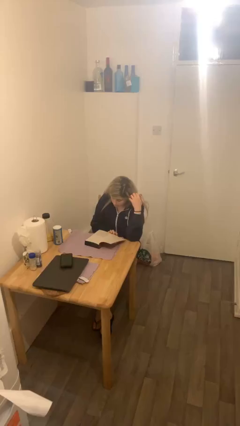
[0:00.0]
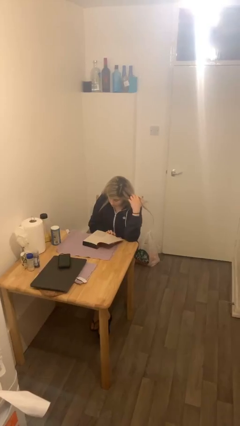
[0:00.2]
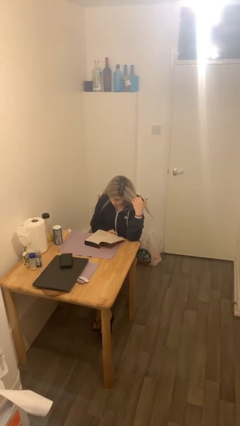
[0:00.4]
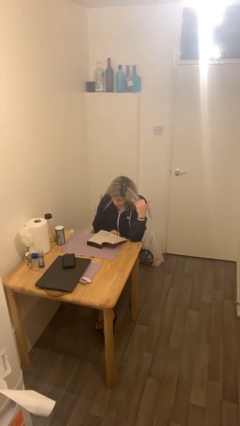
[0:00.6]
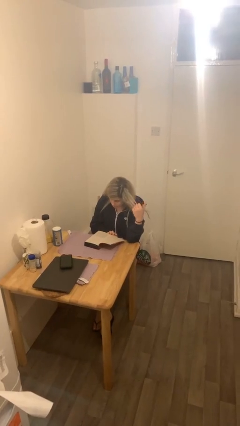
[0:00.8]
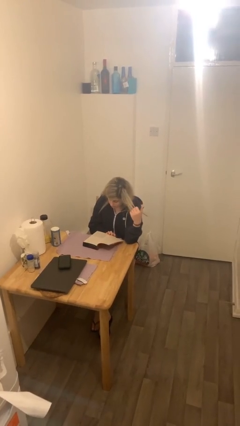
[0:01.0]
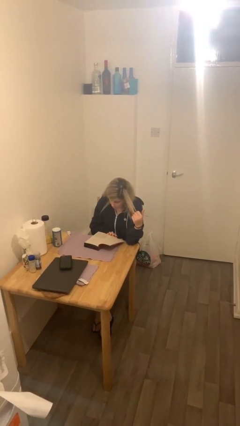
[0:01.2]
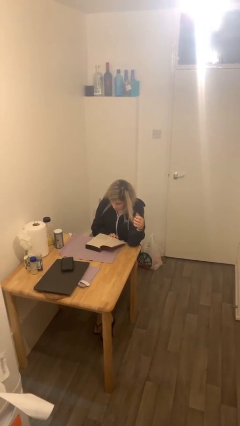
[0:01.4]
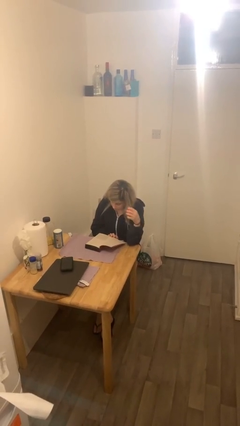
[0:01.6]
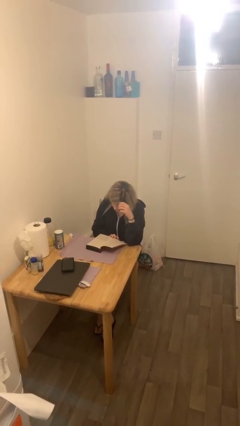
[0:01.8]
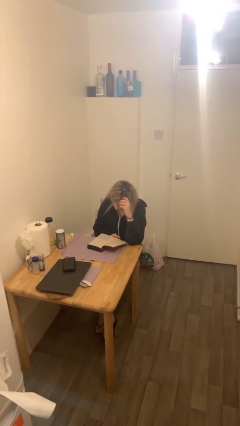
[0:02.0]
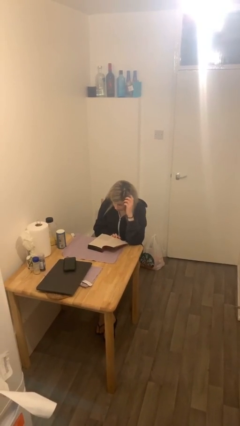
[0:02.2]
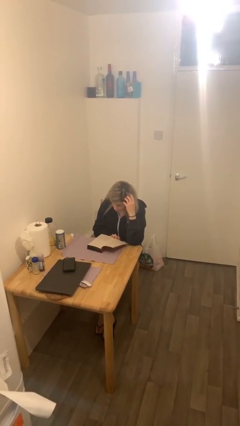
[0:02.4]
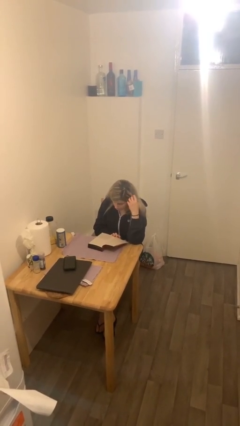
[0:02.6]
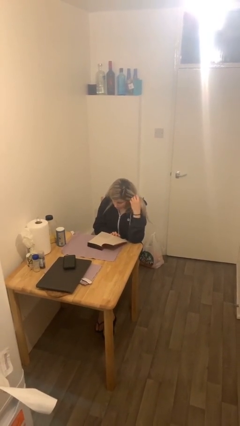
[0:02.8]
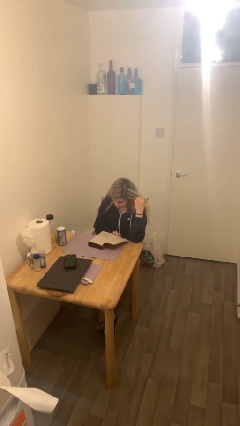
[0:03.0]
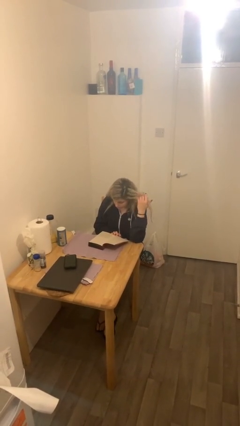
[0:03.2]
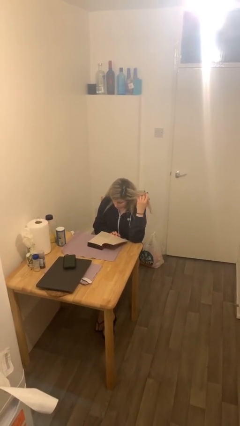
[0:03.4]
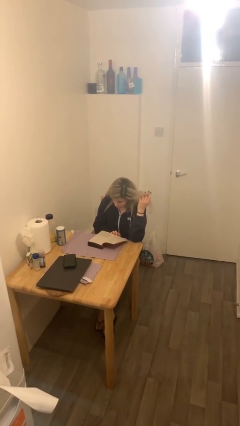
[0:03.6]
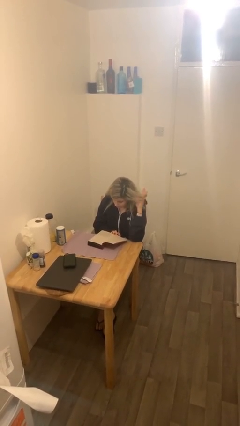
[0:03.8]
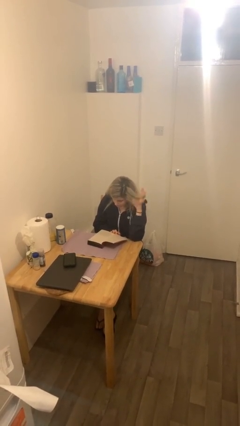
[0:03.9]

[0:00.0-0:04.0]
person reads document

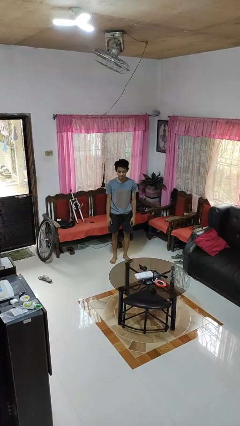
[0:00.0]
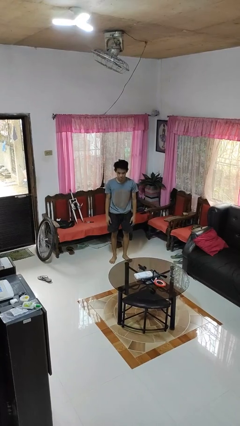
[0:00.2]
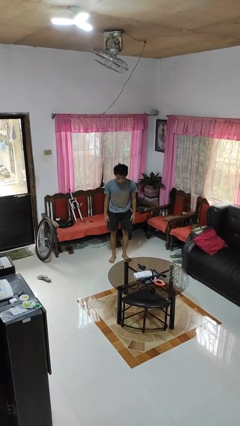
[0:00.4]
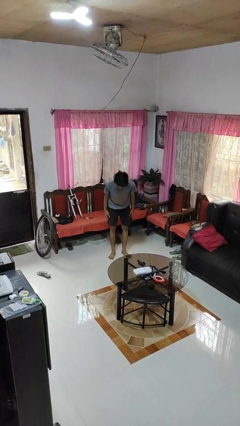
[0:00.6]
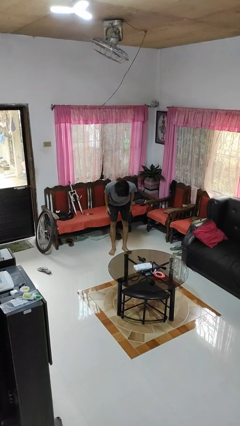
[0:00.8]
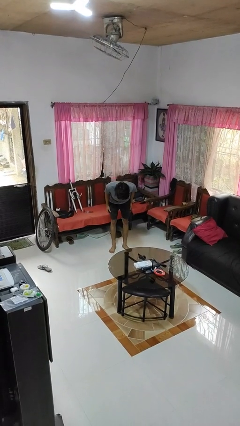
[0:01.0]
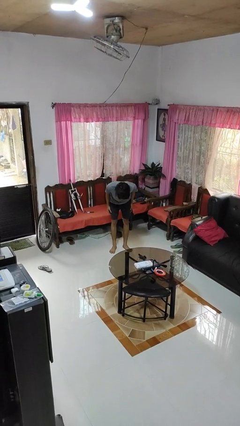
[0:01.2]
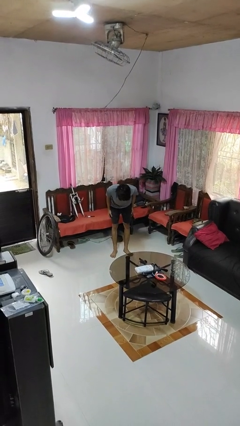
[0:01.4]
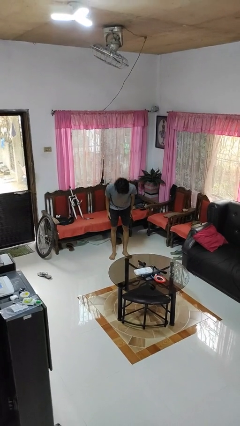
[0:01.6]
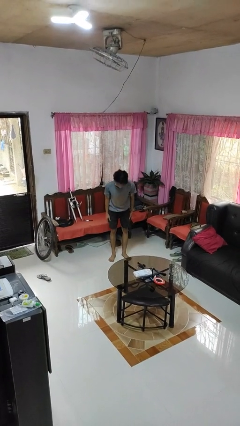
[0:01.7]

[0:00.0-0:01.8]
person bows

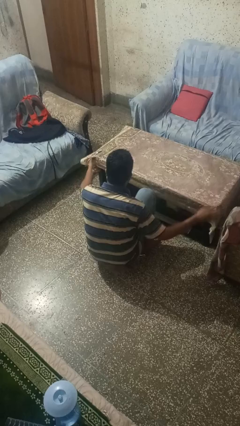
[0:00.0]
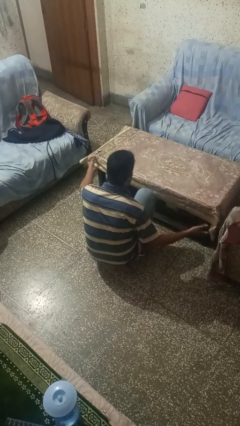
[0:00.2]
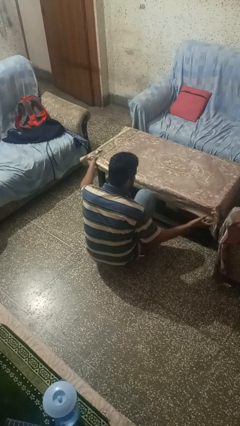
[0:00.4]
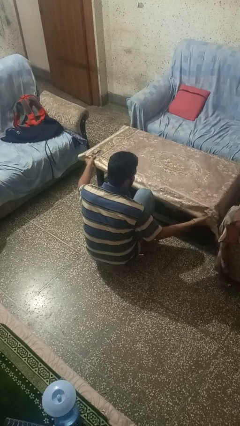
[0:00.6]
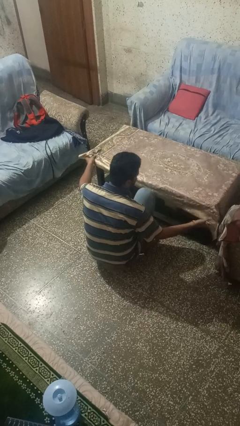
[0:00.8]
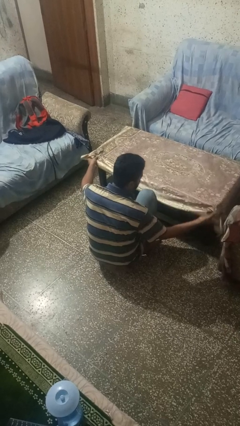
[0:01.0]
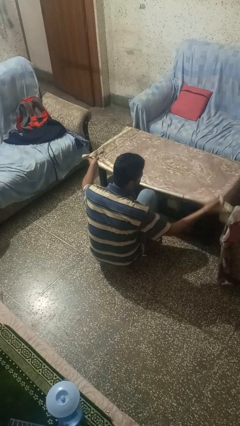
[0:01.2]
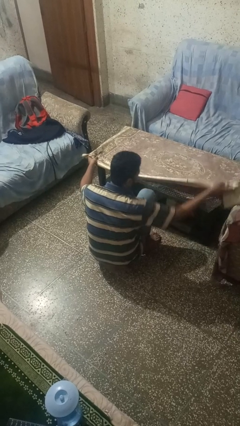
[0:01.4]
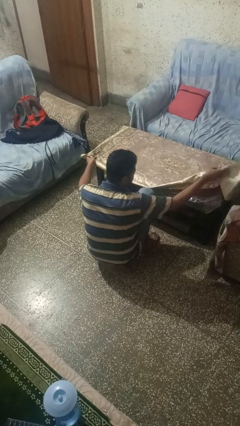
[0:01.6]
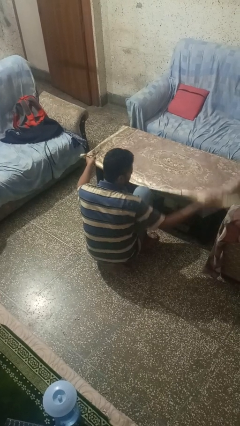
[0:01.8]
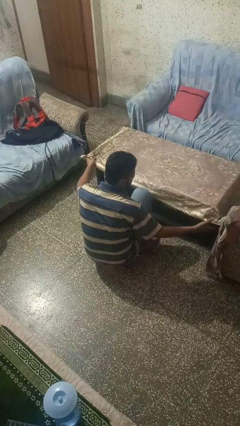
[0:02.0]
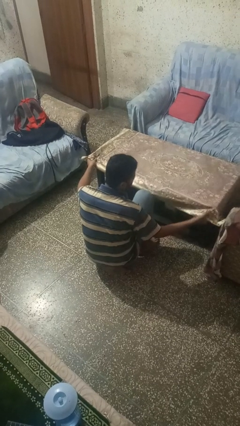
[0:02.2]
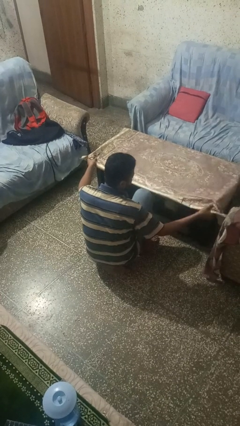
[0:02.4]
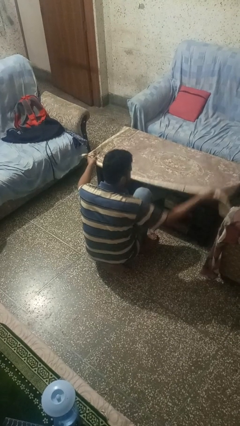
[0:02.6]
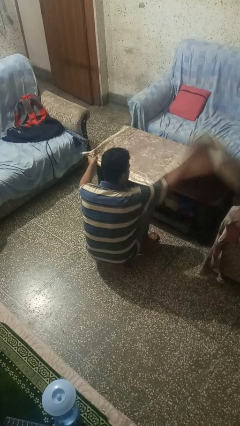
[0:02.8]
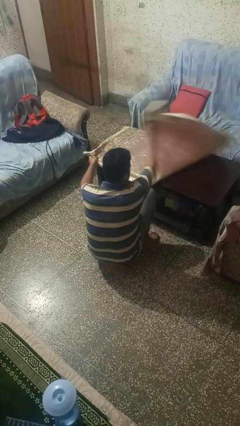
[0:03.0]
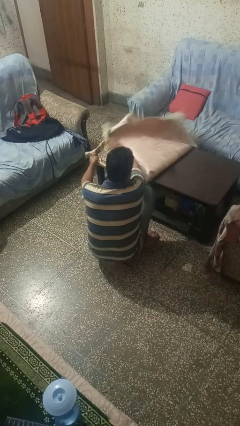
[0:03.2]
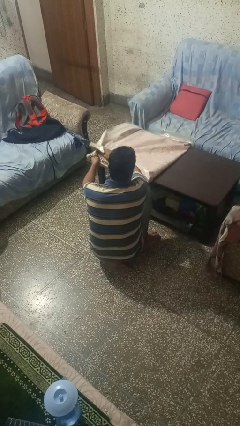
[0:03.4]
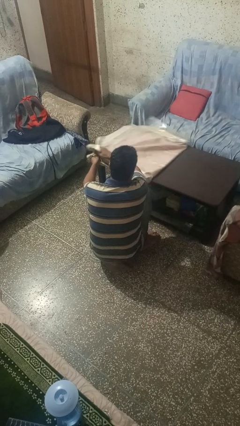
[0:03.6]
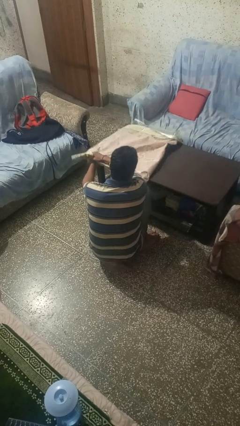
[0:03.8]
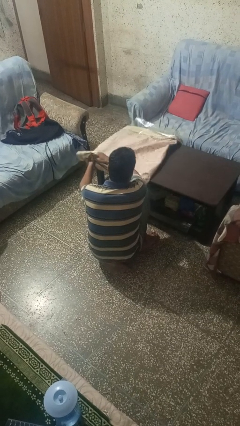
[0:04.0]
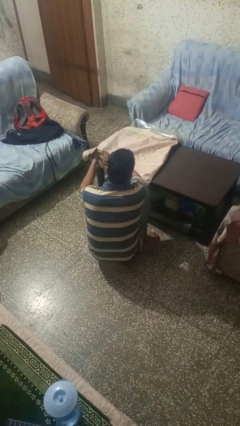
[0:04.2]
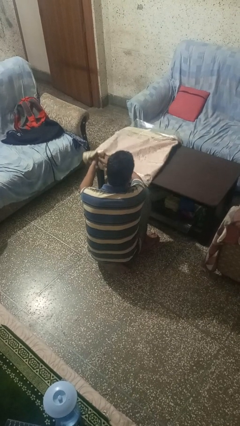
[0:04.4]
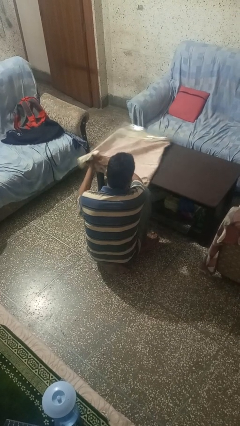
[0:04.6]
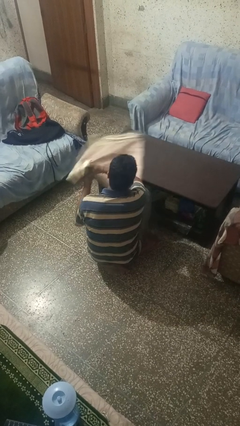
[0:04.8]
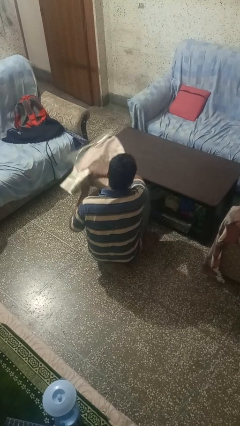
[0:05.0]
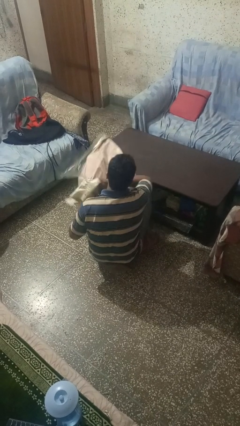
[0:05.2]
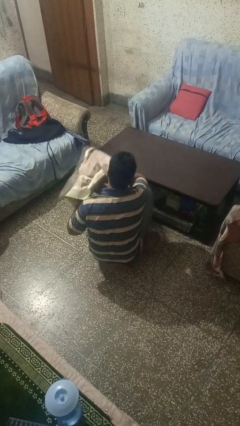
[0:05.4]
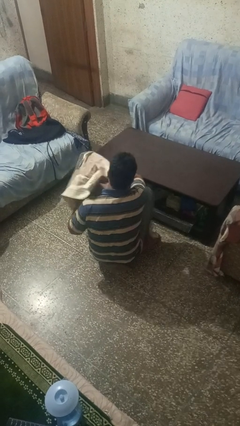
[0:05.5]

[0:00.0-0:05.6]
person folds tablecloth

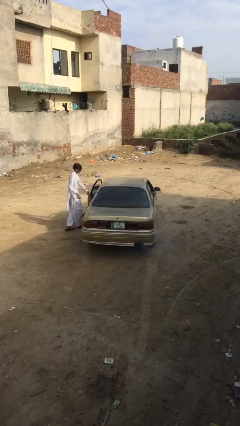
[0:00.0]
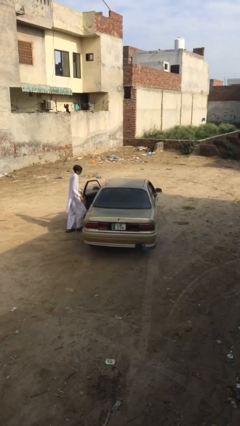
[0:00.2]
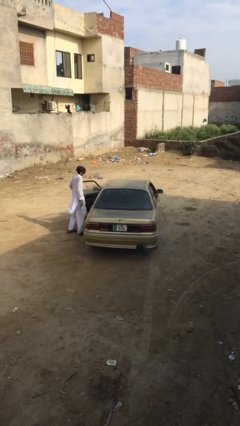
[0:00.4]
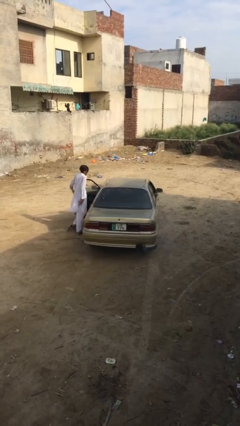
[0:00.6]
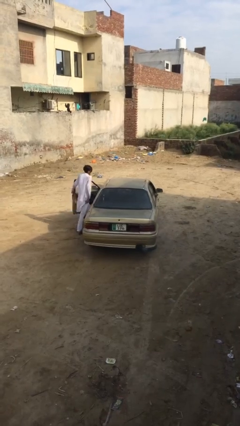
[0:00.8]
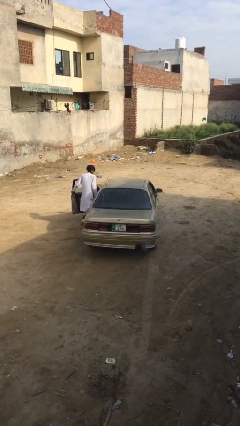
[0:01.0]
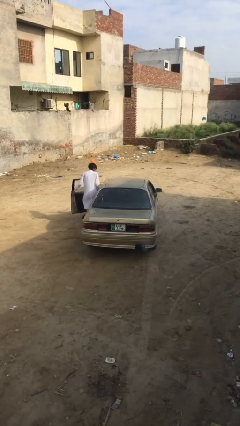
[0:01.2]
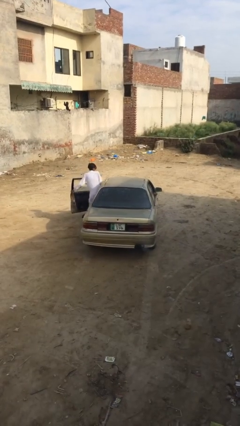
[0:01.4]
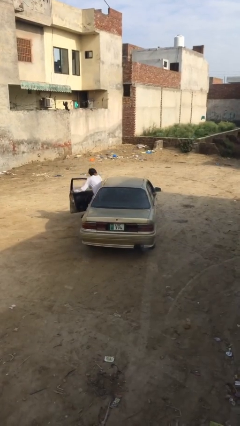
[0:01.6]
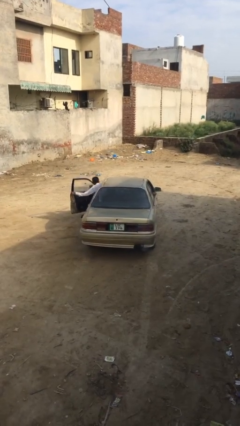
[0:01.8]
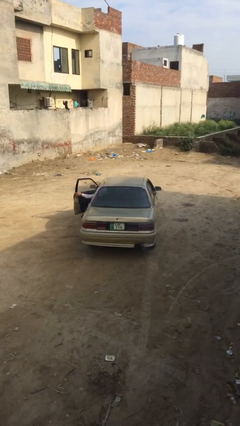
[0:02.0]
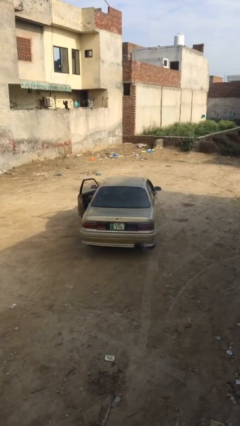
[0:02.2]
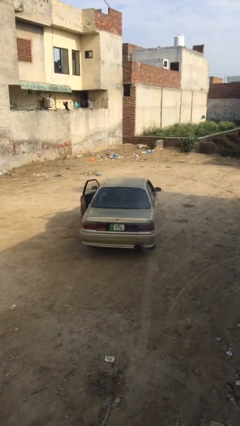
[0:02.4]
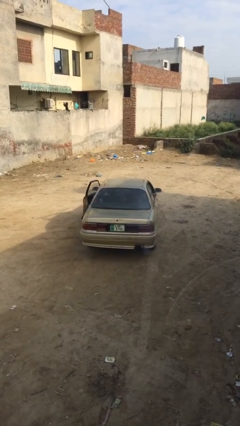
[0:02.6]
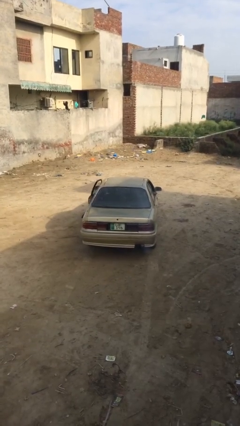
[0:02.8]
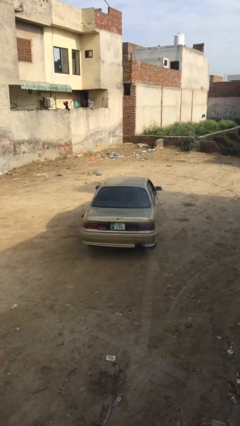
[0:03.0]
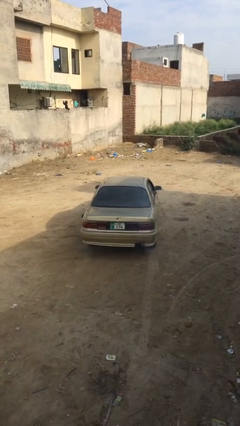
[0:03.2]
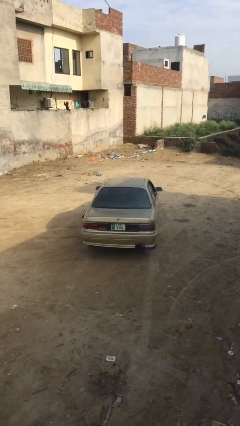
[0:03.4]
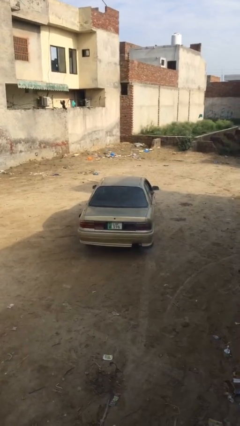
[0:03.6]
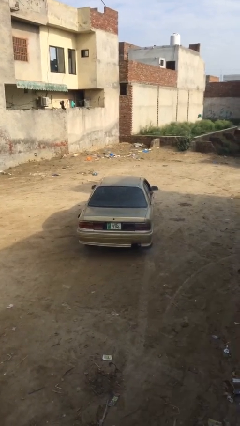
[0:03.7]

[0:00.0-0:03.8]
car picks up person

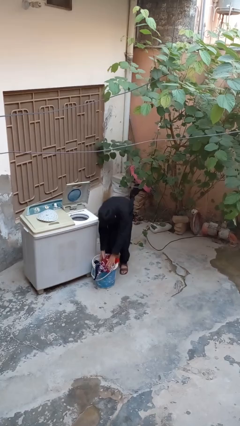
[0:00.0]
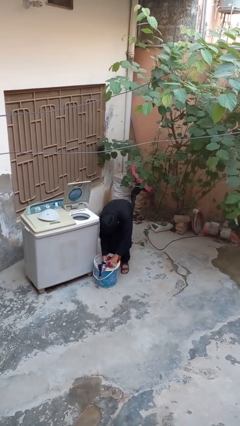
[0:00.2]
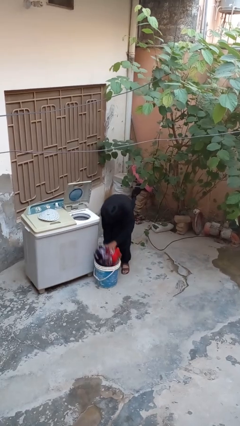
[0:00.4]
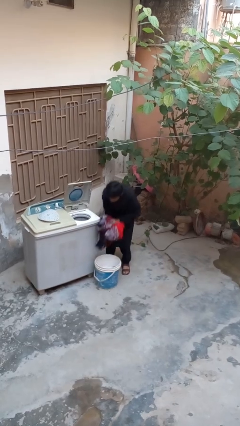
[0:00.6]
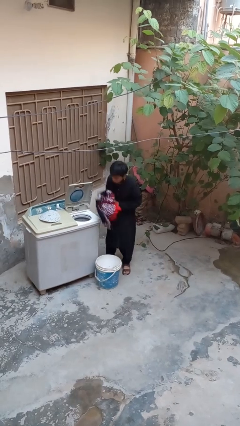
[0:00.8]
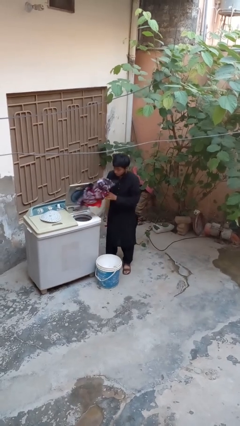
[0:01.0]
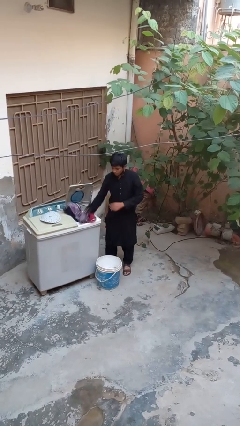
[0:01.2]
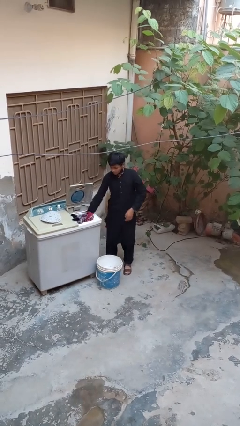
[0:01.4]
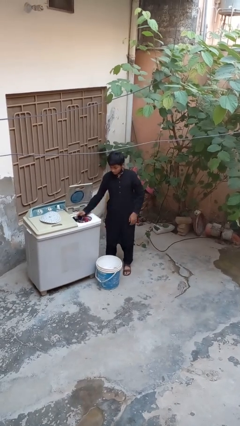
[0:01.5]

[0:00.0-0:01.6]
person loads dryer

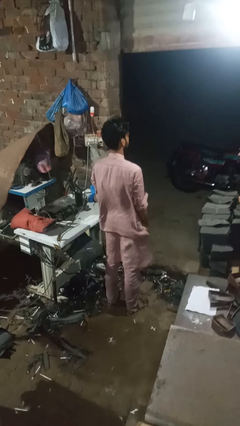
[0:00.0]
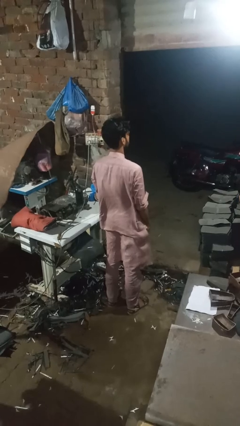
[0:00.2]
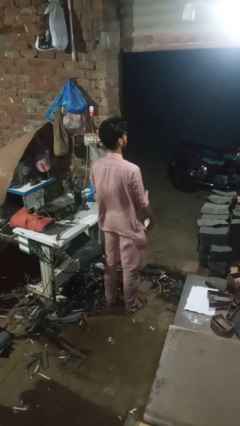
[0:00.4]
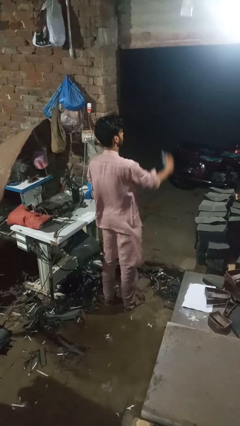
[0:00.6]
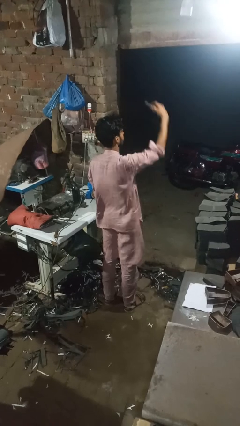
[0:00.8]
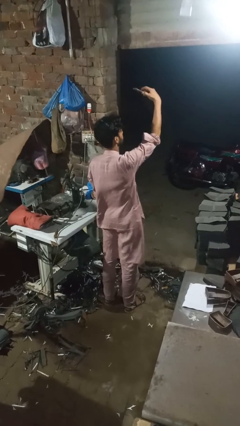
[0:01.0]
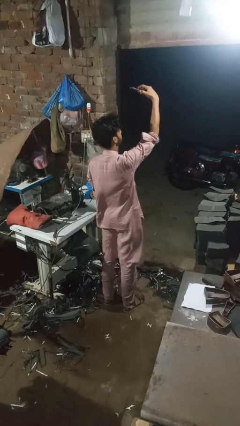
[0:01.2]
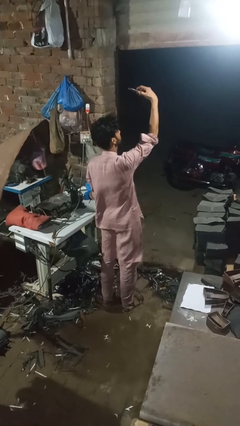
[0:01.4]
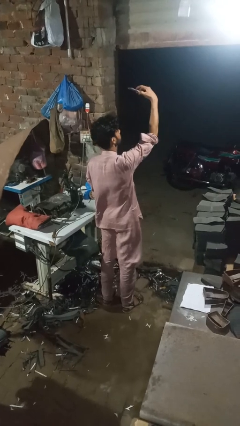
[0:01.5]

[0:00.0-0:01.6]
person takes selfie
